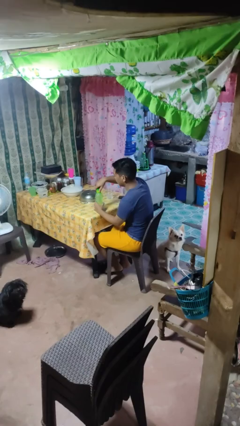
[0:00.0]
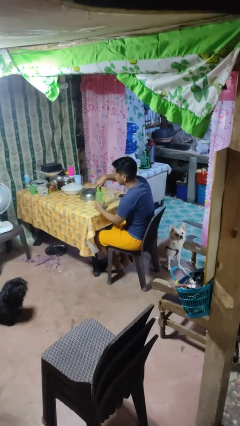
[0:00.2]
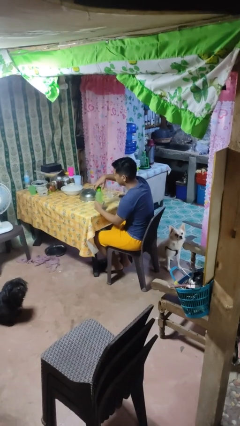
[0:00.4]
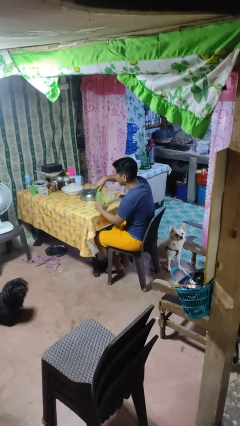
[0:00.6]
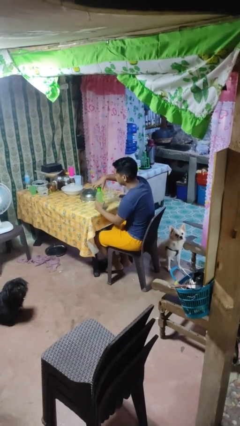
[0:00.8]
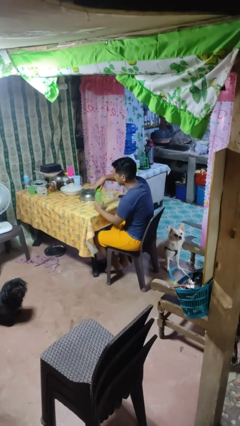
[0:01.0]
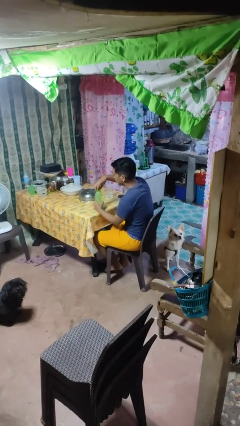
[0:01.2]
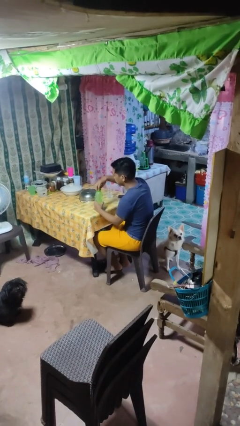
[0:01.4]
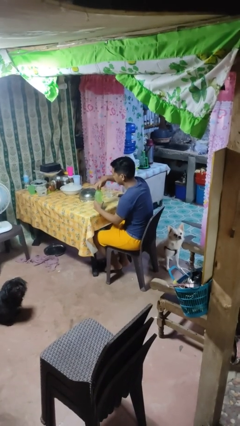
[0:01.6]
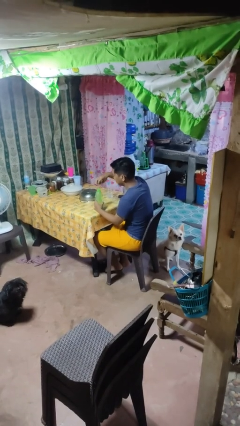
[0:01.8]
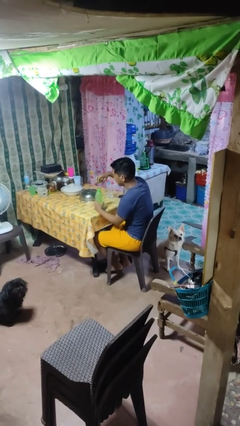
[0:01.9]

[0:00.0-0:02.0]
person unscrews lid from bottle

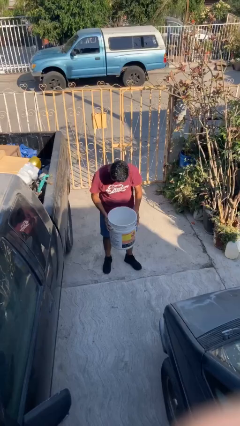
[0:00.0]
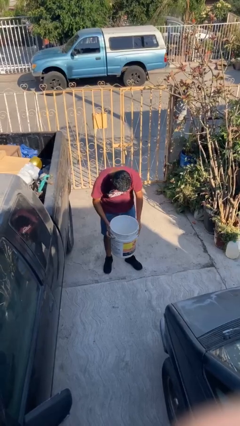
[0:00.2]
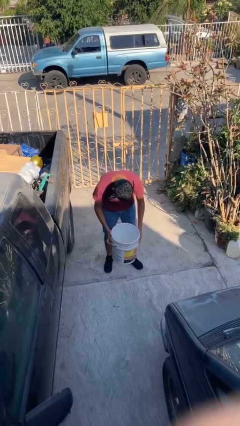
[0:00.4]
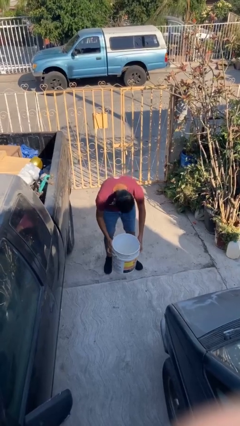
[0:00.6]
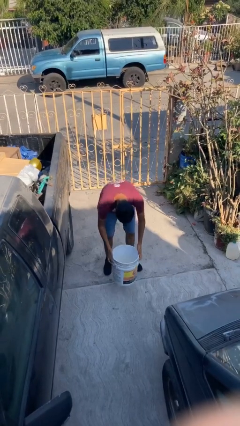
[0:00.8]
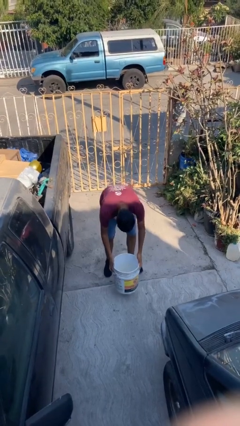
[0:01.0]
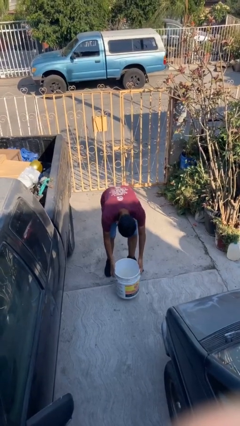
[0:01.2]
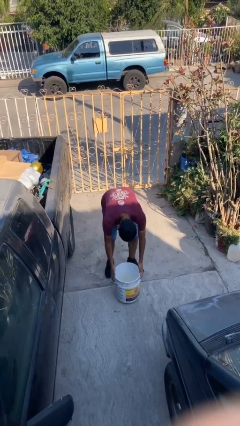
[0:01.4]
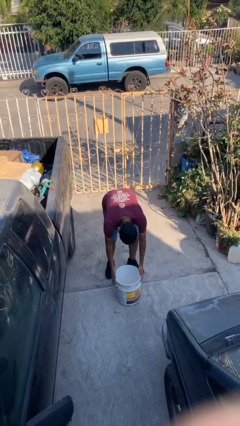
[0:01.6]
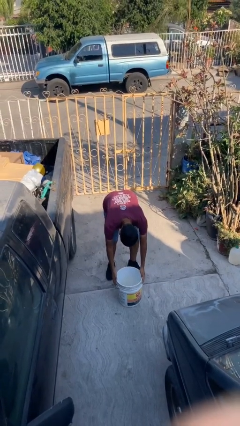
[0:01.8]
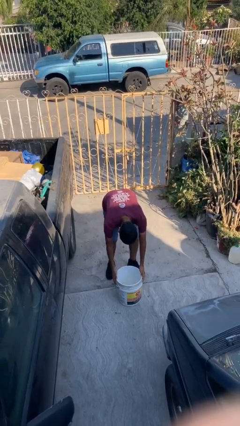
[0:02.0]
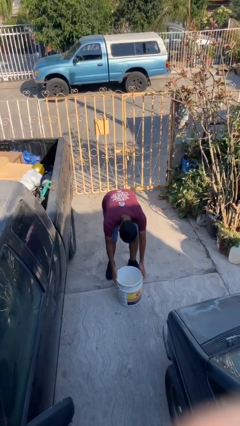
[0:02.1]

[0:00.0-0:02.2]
person puts down object on floor

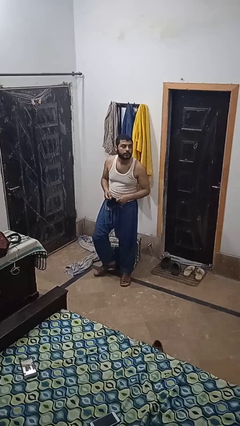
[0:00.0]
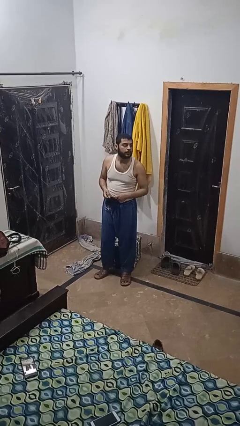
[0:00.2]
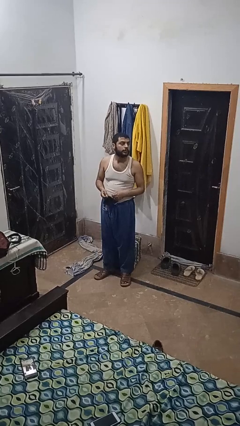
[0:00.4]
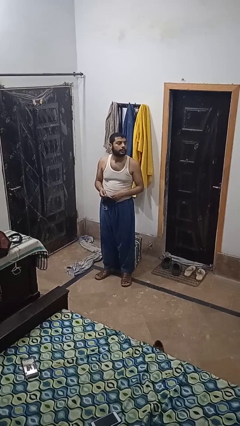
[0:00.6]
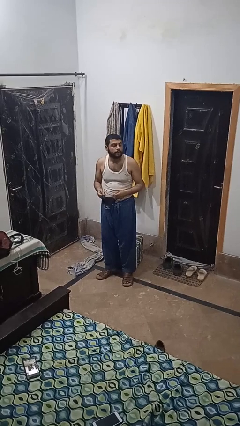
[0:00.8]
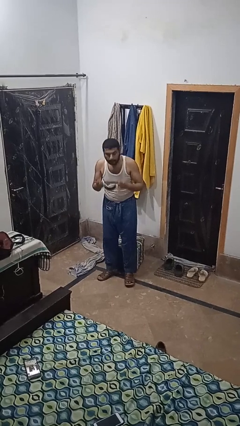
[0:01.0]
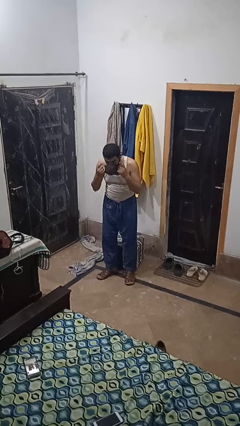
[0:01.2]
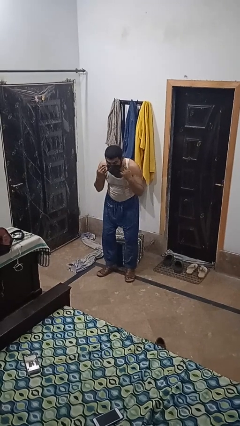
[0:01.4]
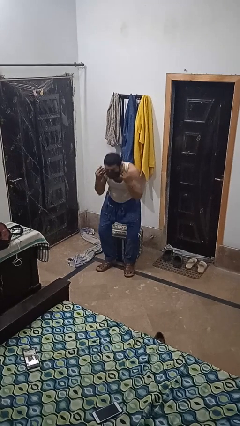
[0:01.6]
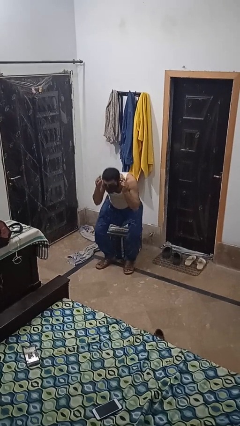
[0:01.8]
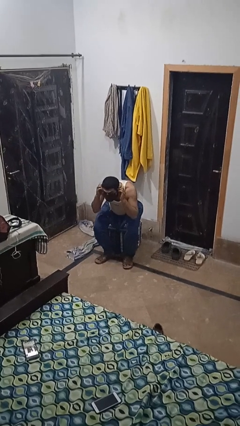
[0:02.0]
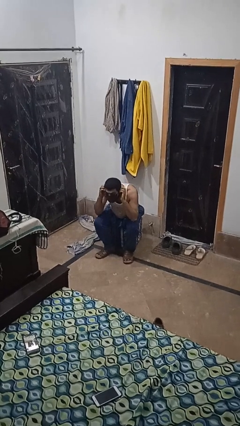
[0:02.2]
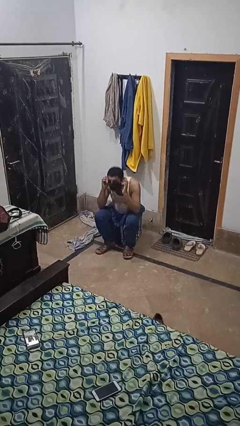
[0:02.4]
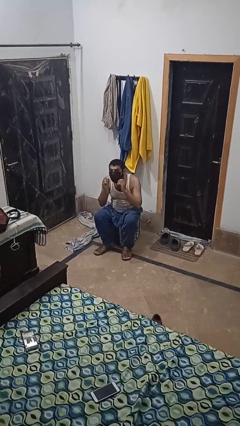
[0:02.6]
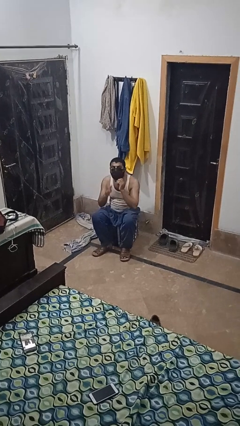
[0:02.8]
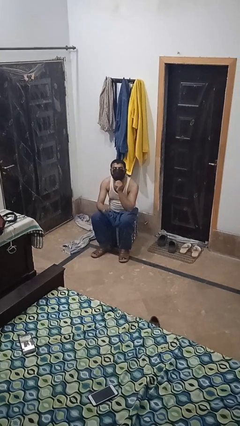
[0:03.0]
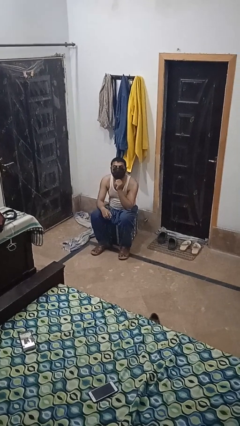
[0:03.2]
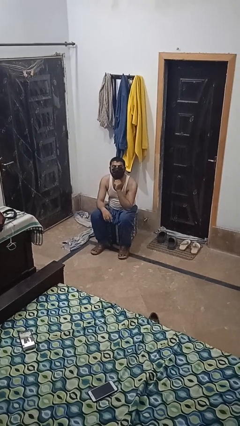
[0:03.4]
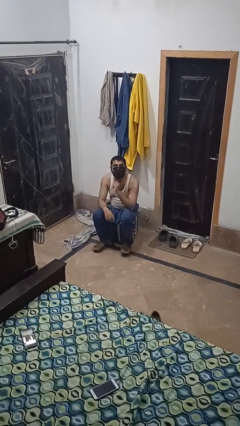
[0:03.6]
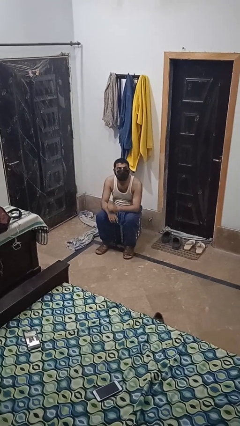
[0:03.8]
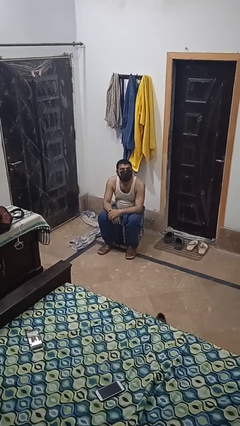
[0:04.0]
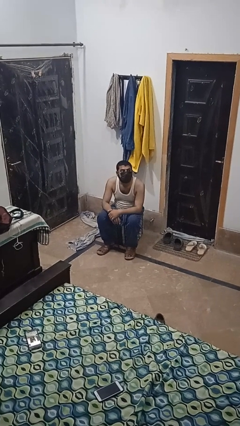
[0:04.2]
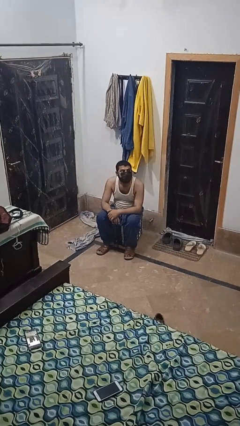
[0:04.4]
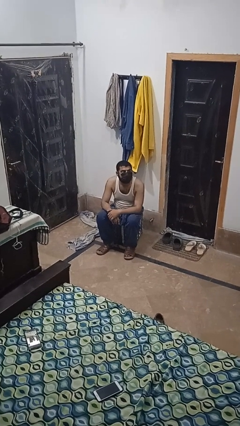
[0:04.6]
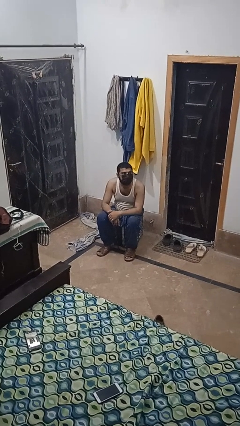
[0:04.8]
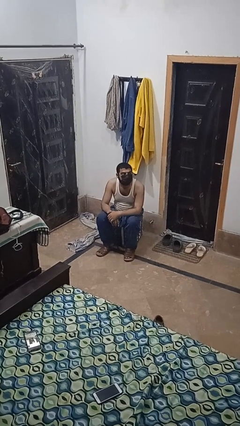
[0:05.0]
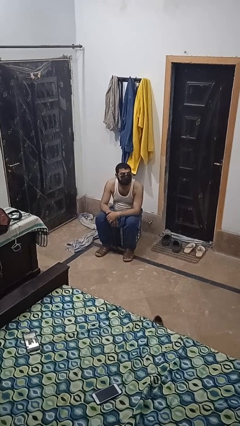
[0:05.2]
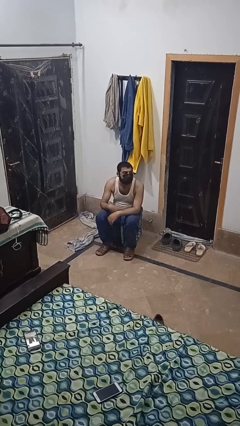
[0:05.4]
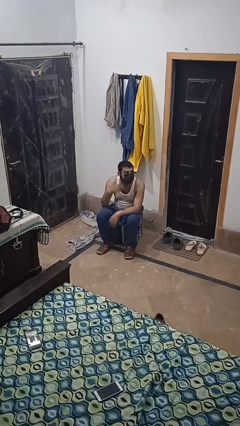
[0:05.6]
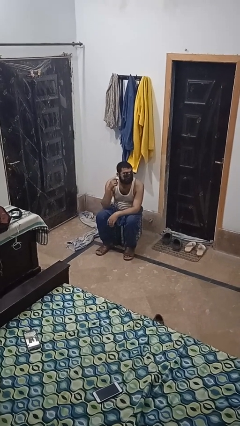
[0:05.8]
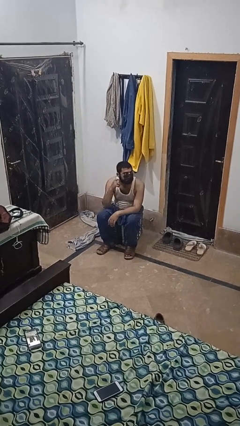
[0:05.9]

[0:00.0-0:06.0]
person puts on facemask

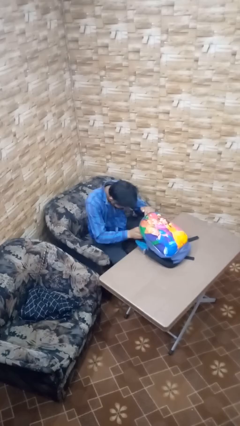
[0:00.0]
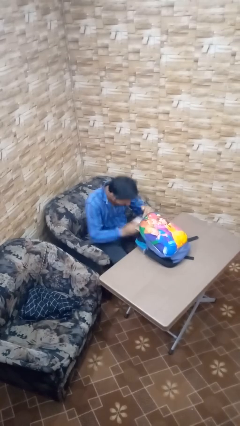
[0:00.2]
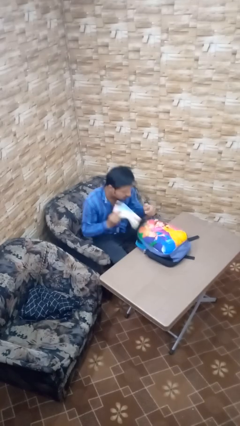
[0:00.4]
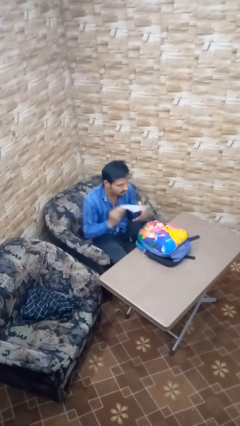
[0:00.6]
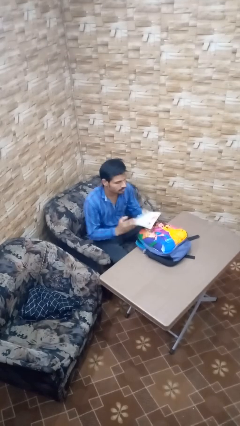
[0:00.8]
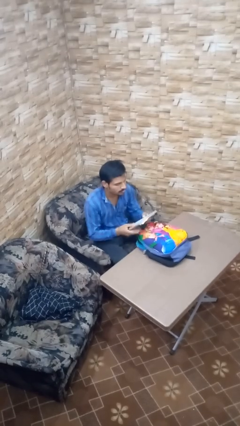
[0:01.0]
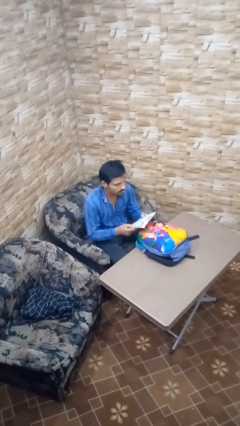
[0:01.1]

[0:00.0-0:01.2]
person takes object from backpack

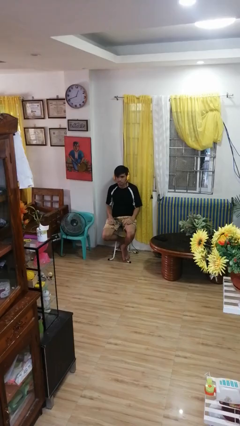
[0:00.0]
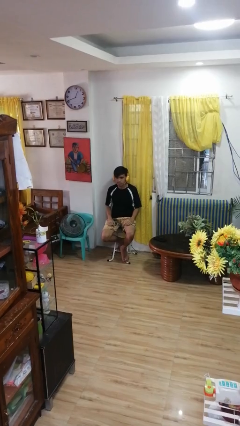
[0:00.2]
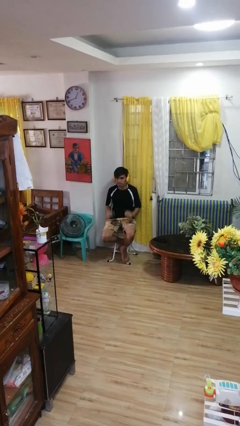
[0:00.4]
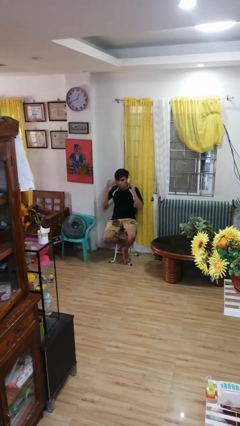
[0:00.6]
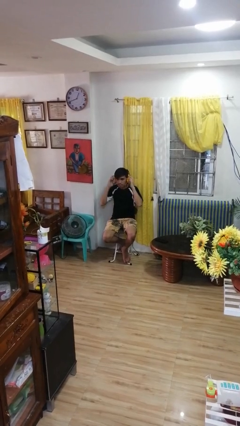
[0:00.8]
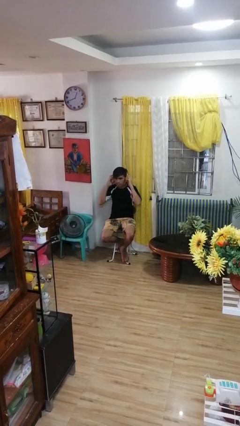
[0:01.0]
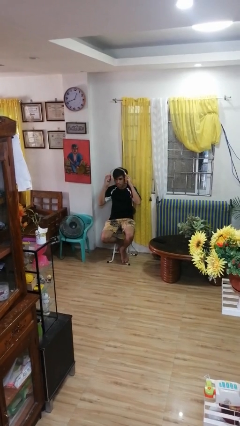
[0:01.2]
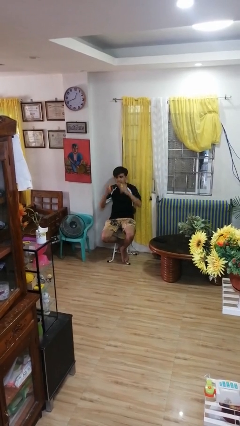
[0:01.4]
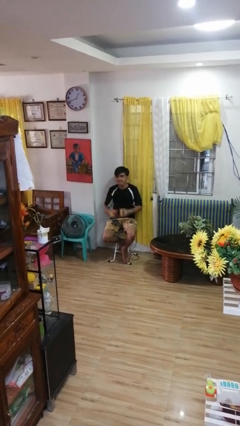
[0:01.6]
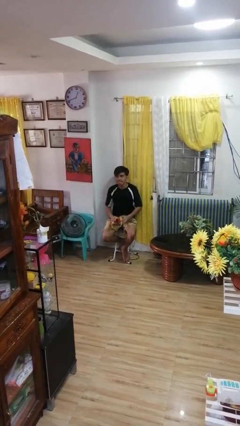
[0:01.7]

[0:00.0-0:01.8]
person takes off headphones

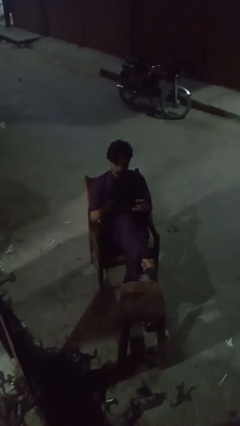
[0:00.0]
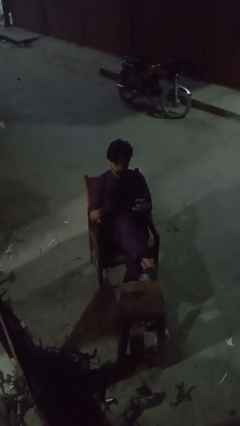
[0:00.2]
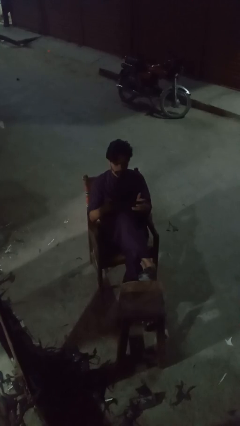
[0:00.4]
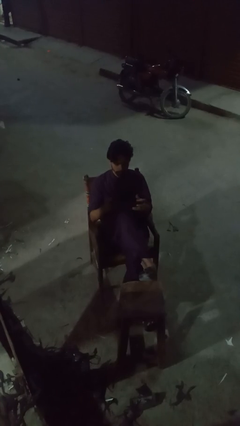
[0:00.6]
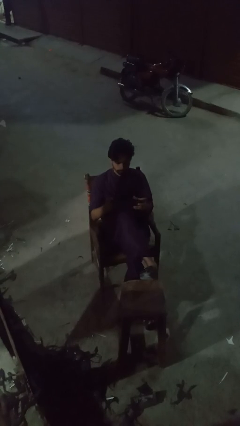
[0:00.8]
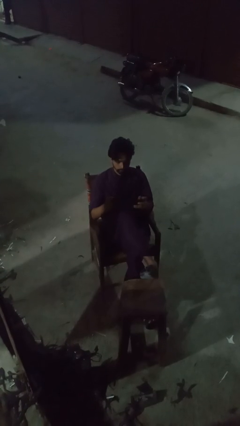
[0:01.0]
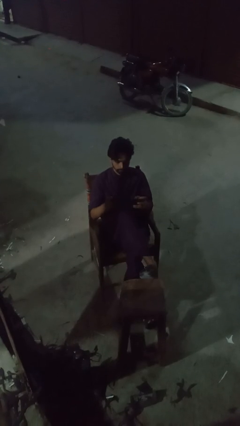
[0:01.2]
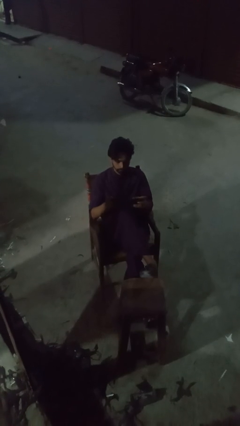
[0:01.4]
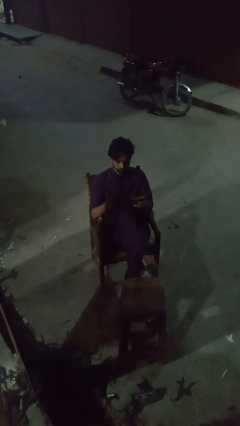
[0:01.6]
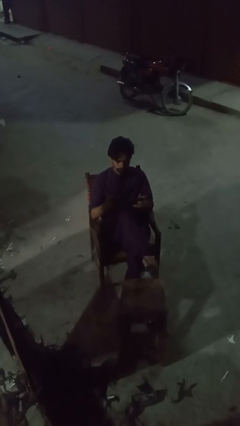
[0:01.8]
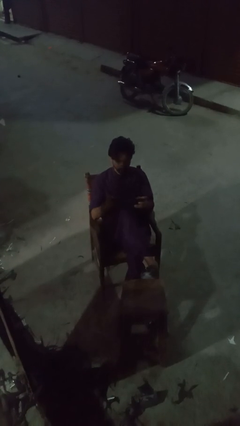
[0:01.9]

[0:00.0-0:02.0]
person interacts with handheld game

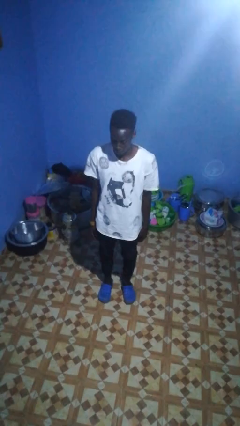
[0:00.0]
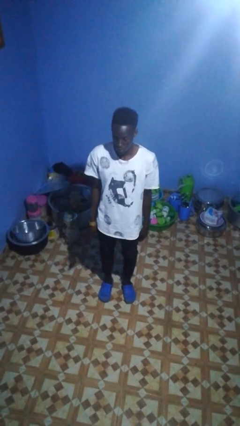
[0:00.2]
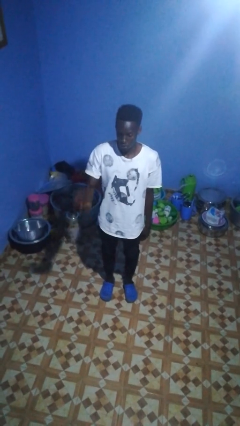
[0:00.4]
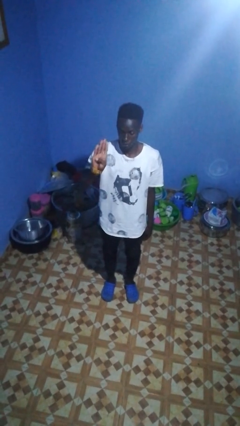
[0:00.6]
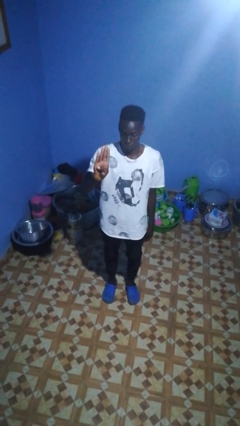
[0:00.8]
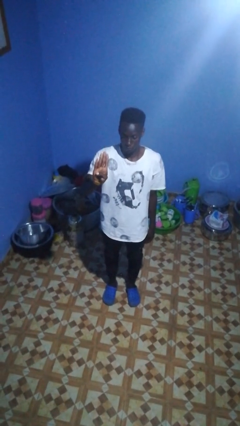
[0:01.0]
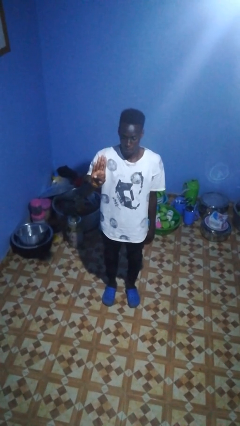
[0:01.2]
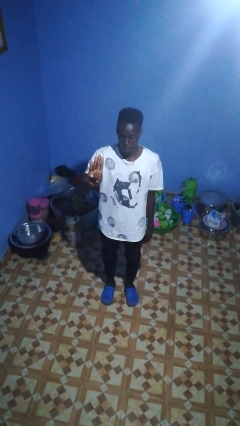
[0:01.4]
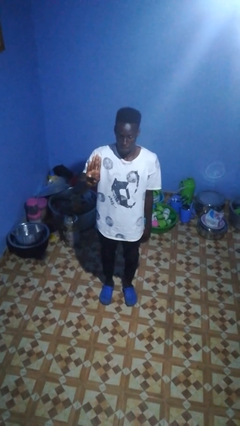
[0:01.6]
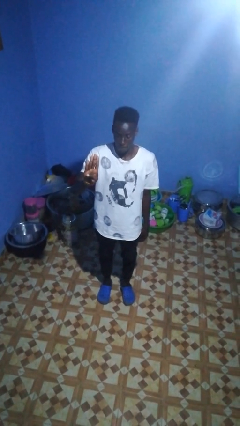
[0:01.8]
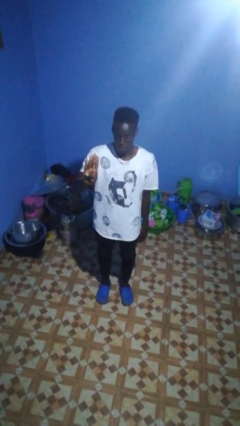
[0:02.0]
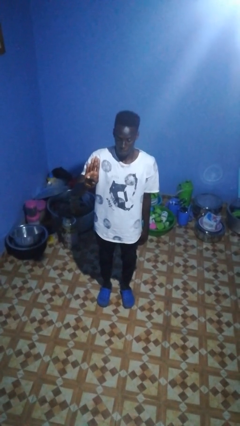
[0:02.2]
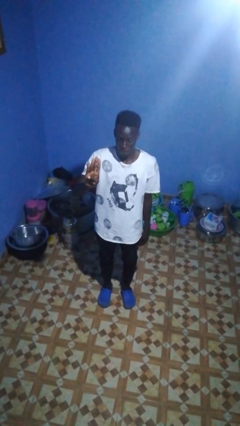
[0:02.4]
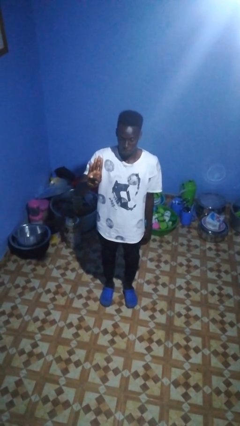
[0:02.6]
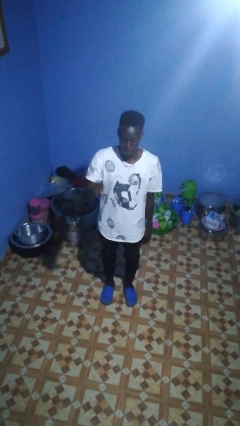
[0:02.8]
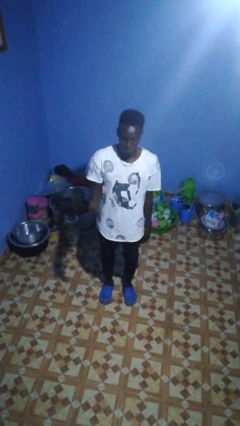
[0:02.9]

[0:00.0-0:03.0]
person gestures number four
